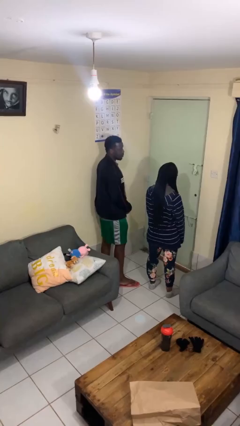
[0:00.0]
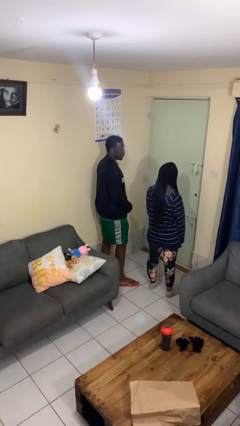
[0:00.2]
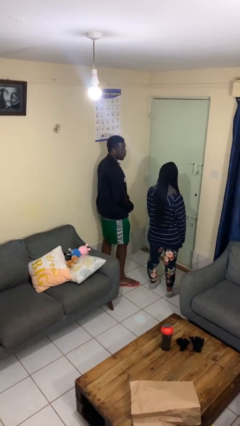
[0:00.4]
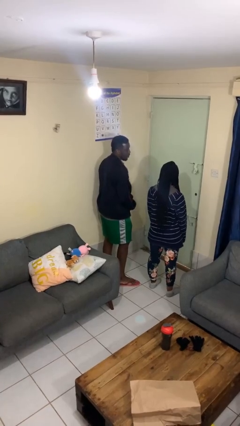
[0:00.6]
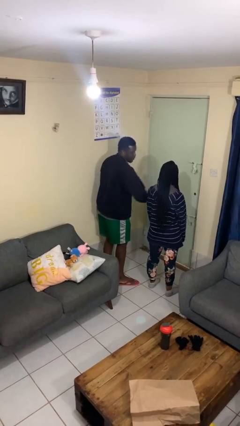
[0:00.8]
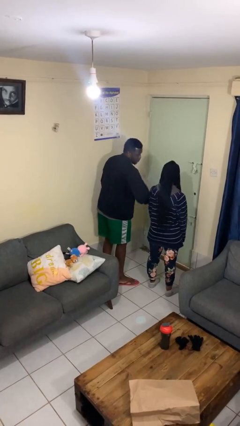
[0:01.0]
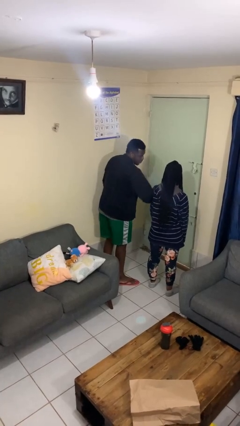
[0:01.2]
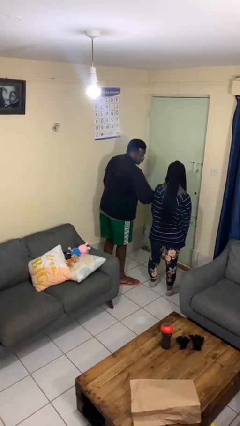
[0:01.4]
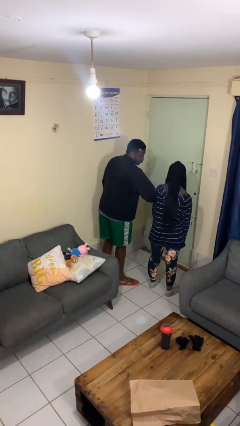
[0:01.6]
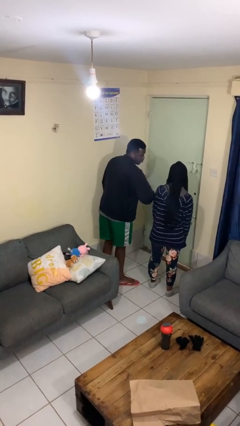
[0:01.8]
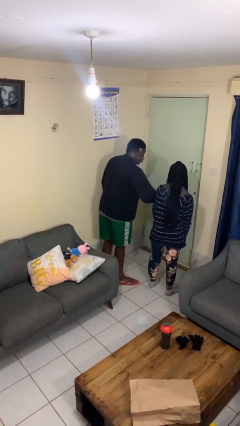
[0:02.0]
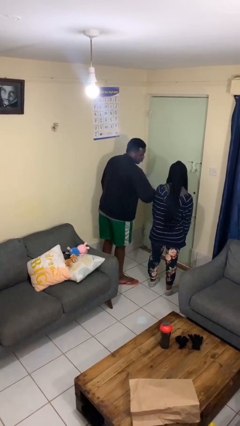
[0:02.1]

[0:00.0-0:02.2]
person nudges person with elbow

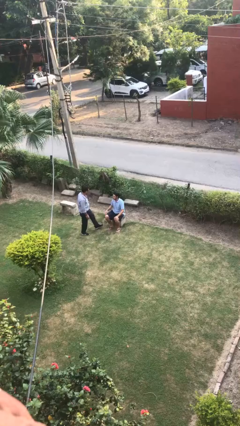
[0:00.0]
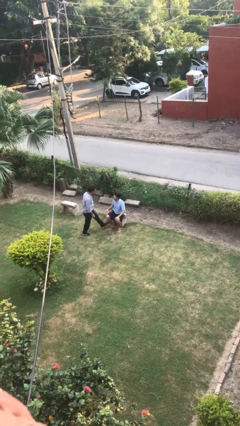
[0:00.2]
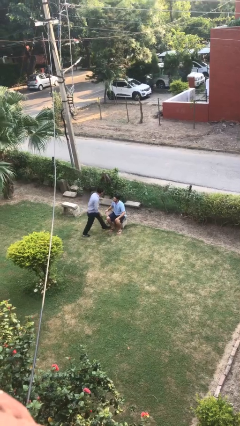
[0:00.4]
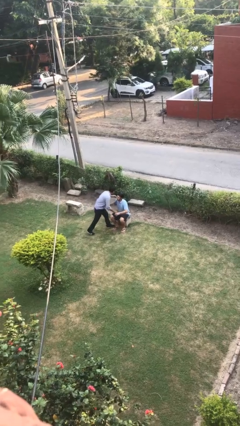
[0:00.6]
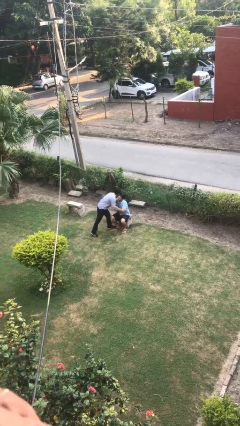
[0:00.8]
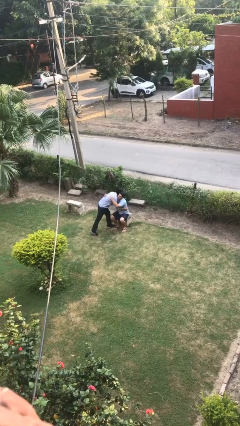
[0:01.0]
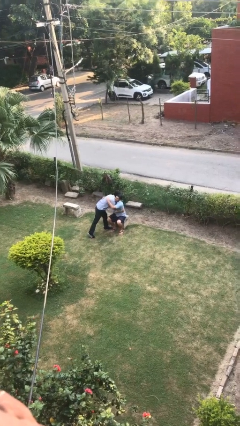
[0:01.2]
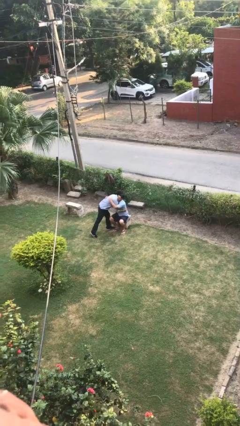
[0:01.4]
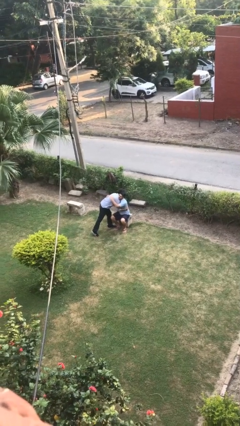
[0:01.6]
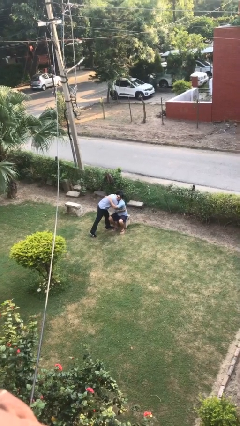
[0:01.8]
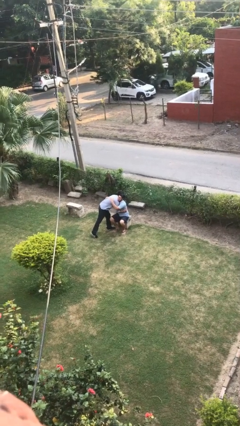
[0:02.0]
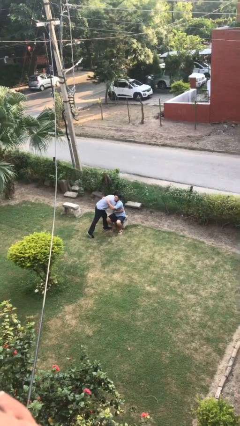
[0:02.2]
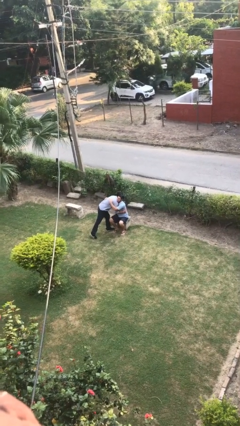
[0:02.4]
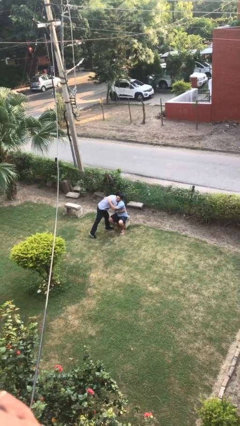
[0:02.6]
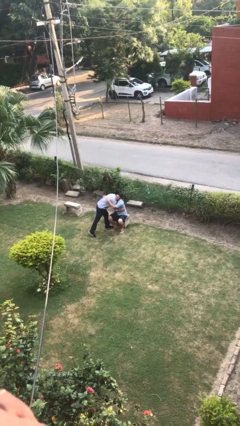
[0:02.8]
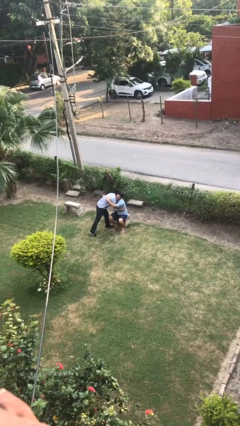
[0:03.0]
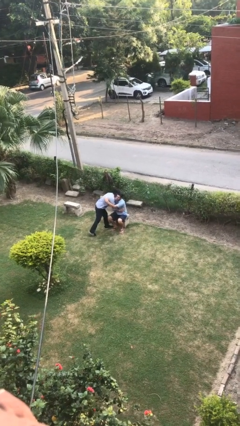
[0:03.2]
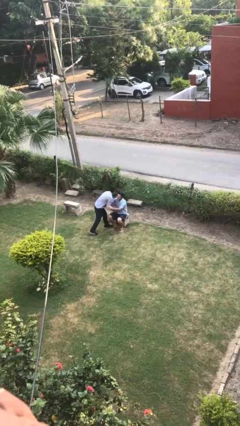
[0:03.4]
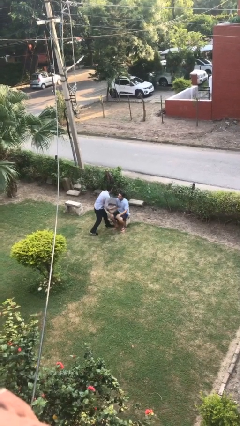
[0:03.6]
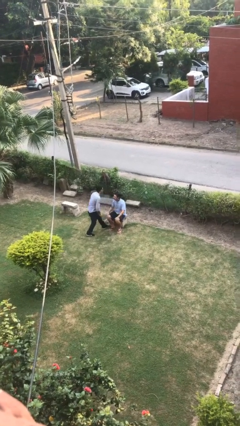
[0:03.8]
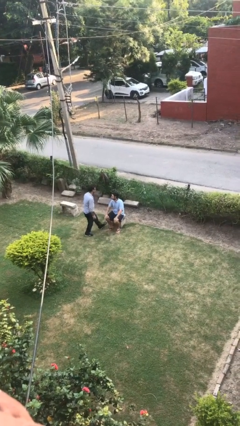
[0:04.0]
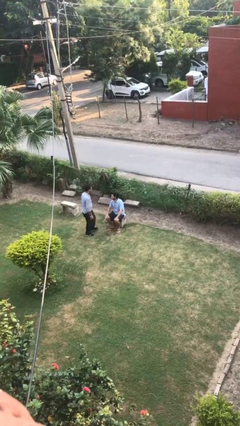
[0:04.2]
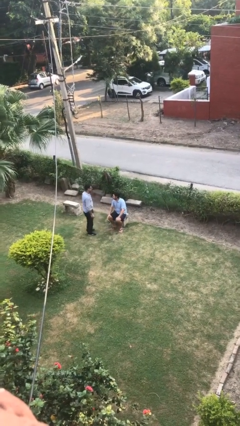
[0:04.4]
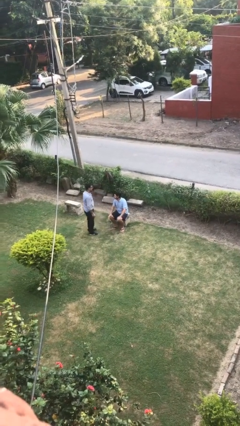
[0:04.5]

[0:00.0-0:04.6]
person embraces person

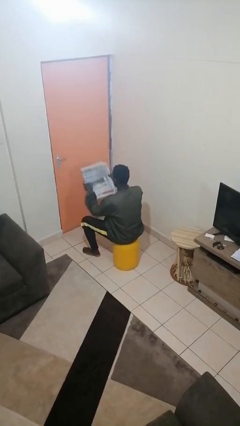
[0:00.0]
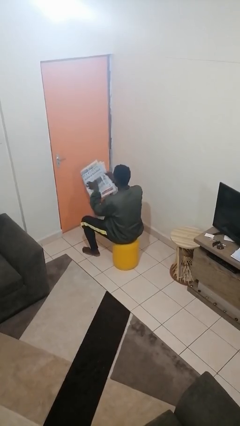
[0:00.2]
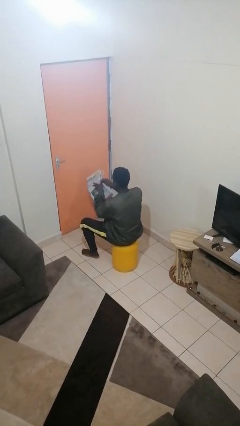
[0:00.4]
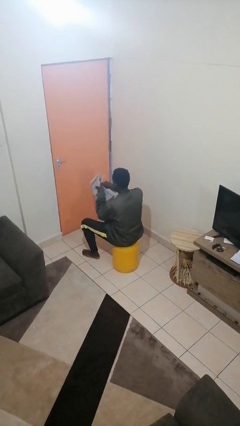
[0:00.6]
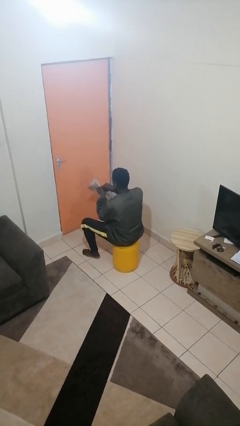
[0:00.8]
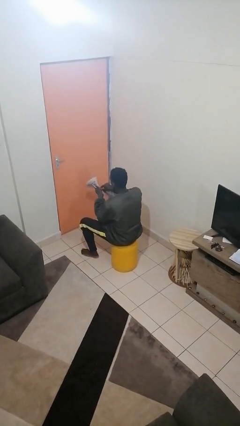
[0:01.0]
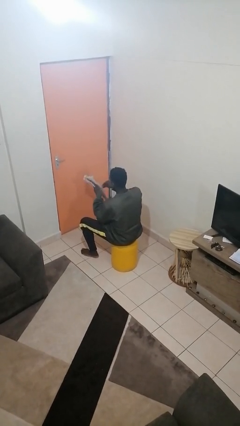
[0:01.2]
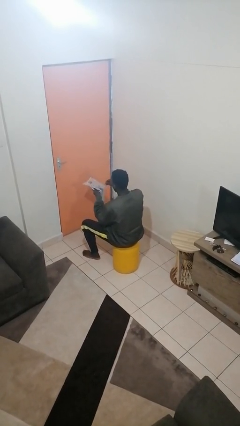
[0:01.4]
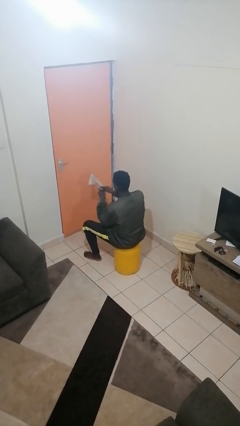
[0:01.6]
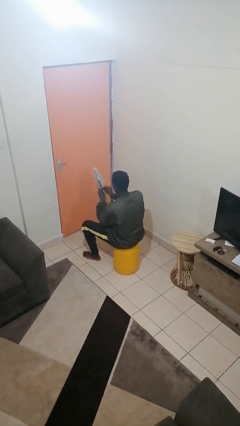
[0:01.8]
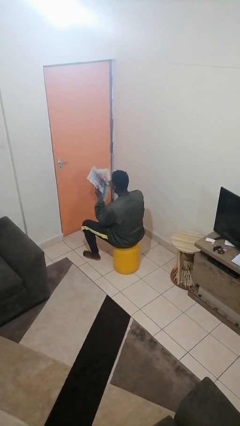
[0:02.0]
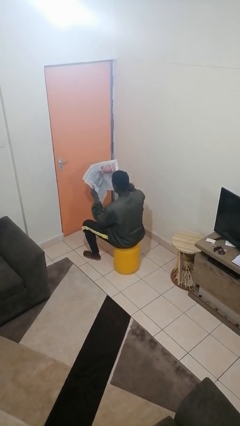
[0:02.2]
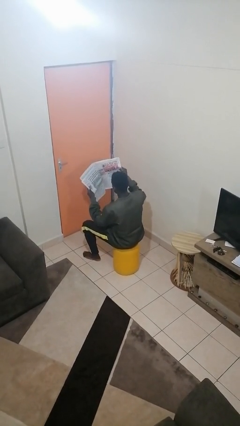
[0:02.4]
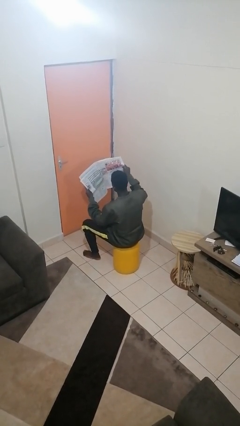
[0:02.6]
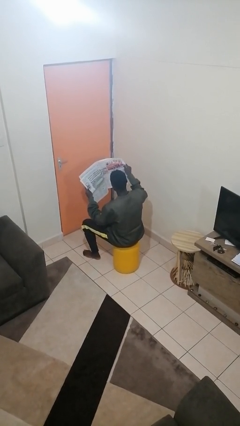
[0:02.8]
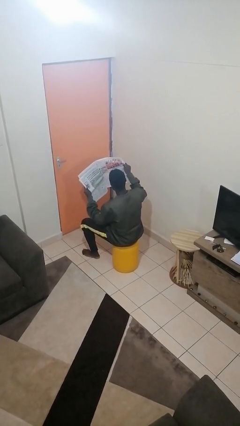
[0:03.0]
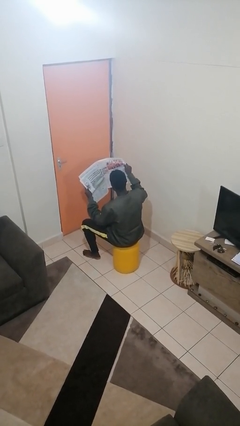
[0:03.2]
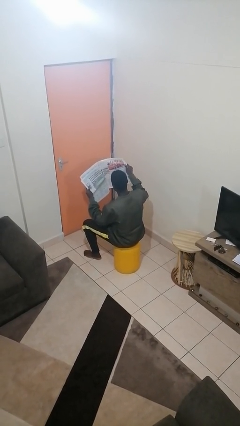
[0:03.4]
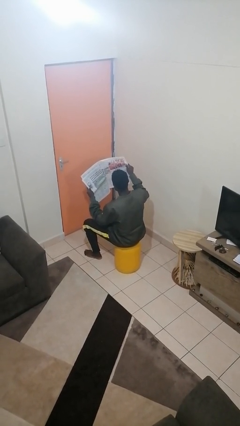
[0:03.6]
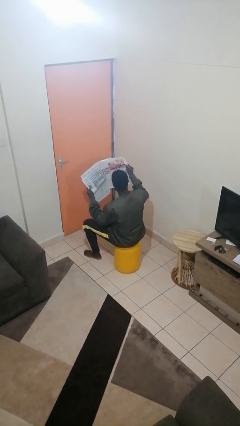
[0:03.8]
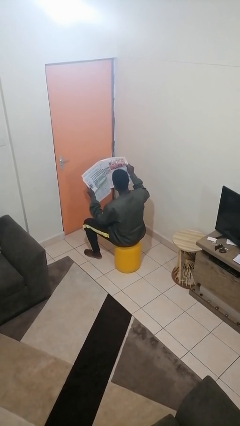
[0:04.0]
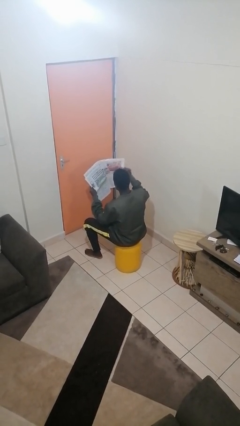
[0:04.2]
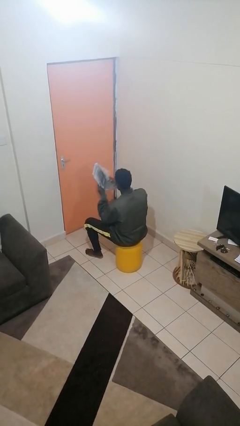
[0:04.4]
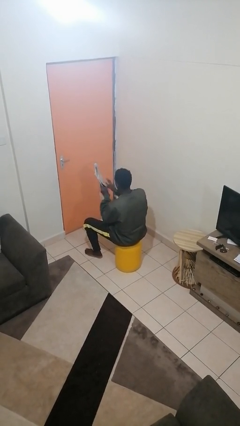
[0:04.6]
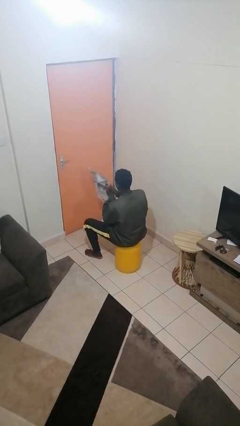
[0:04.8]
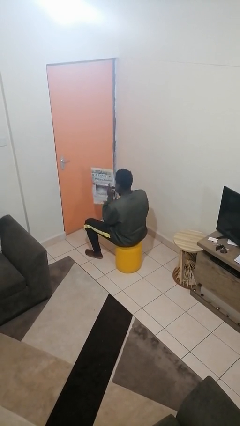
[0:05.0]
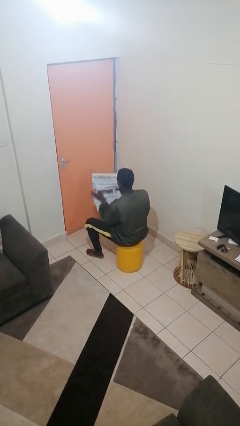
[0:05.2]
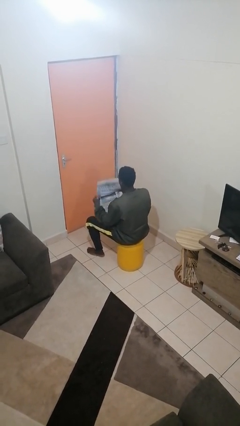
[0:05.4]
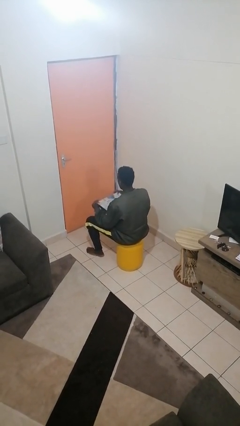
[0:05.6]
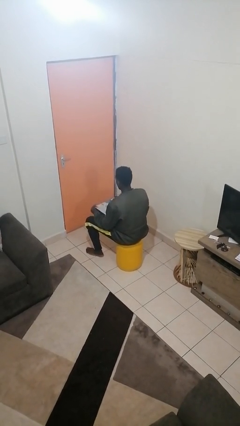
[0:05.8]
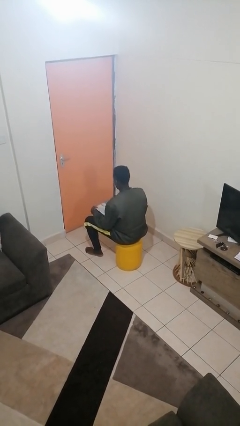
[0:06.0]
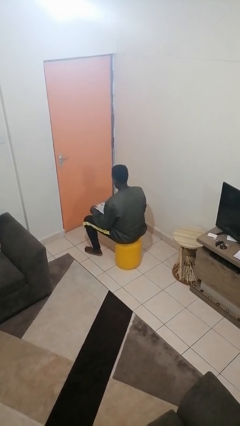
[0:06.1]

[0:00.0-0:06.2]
person reads newspaper

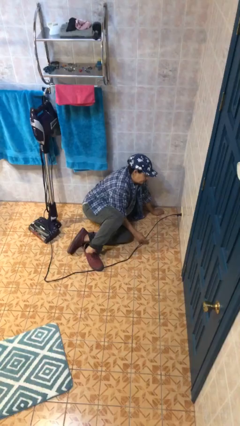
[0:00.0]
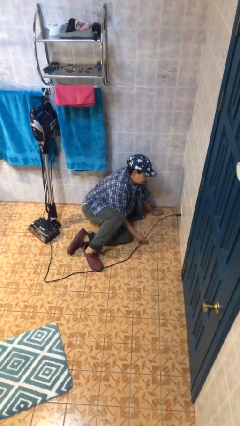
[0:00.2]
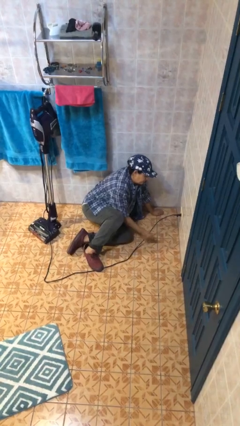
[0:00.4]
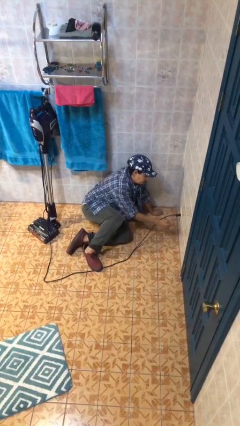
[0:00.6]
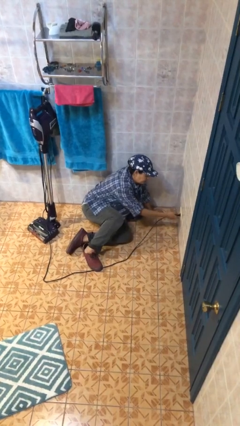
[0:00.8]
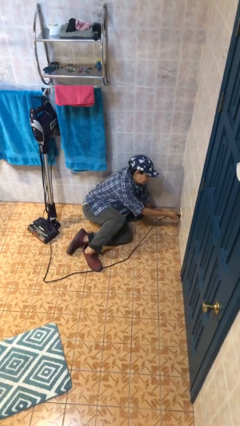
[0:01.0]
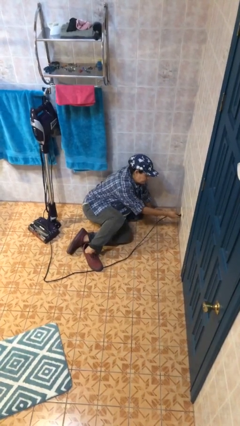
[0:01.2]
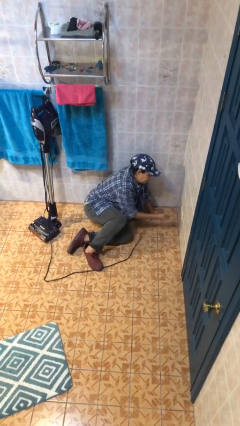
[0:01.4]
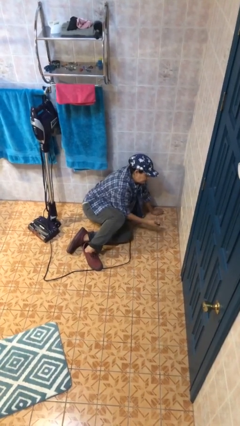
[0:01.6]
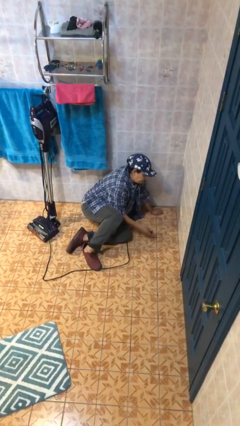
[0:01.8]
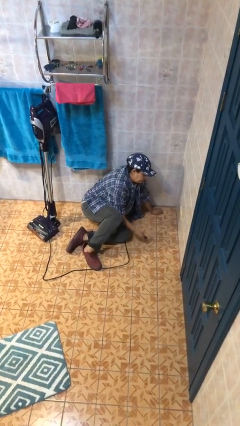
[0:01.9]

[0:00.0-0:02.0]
person unplugs from electrical socket

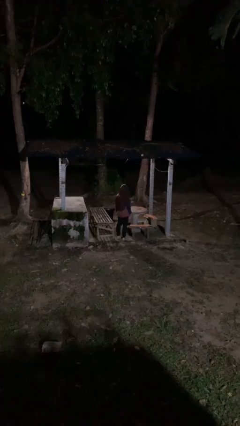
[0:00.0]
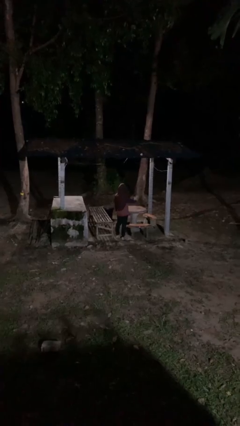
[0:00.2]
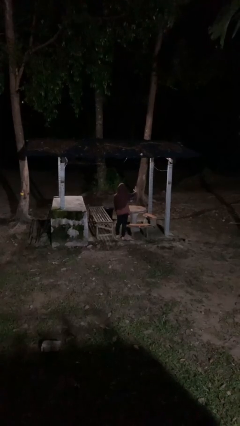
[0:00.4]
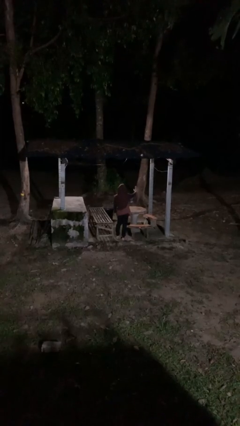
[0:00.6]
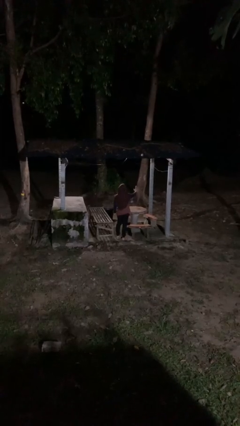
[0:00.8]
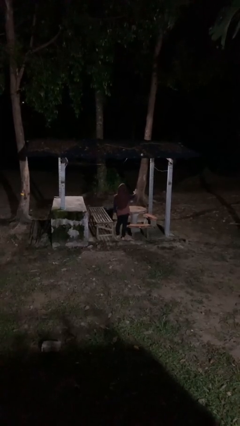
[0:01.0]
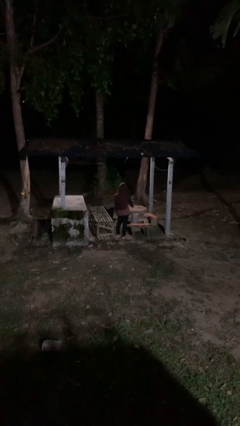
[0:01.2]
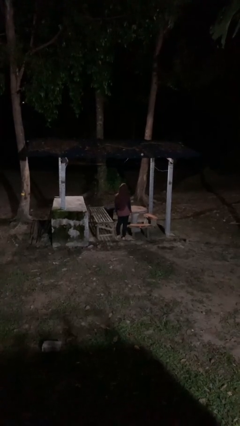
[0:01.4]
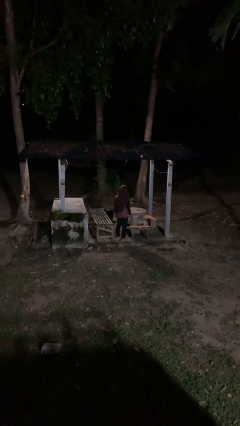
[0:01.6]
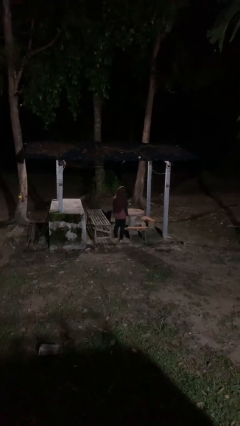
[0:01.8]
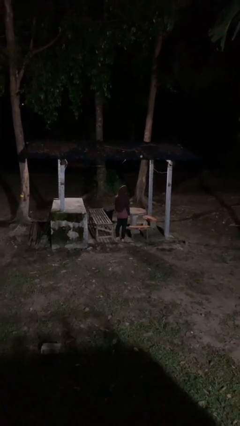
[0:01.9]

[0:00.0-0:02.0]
person gestures stop

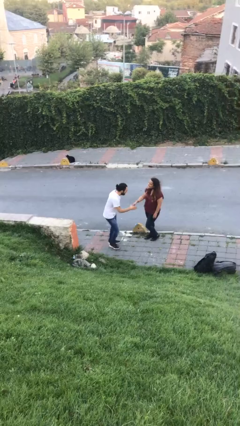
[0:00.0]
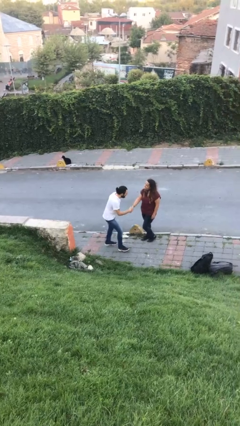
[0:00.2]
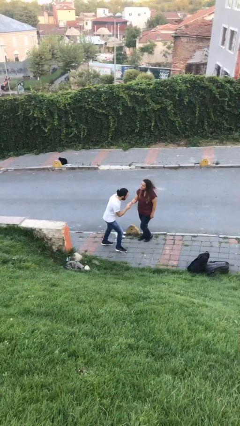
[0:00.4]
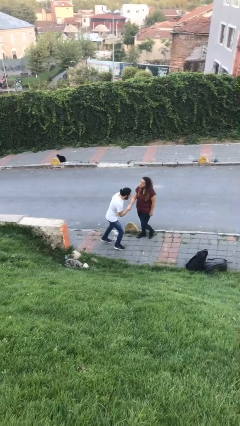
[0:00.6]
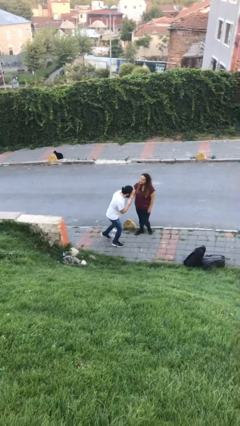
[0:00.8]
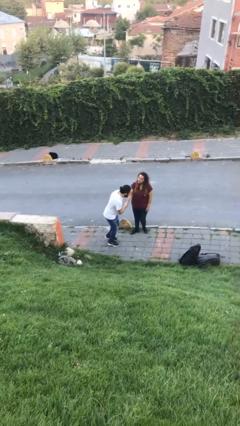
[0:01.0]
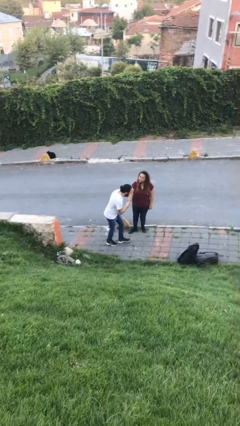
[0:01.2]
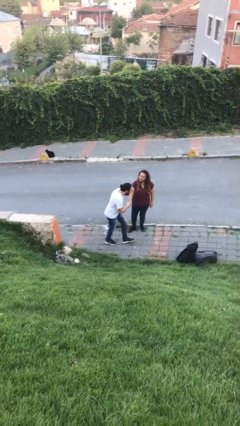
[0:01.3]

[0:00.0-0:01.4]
person shakes hand
